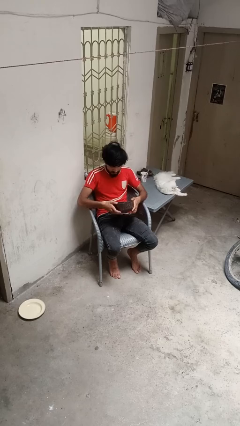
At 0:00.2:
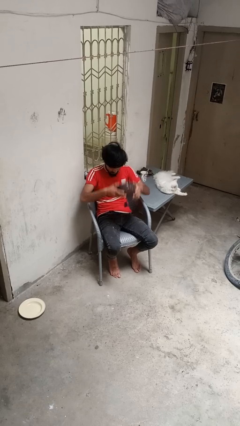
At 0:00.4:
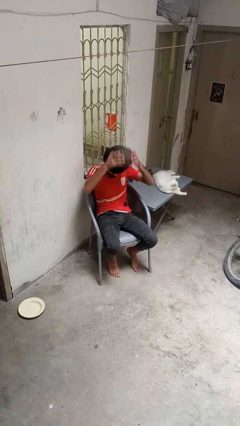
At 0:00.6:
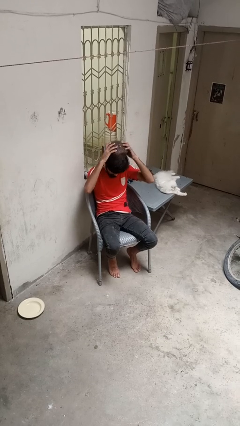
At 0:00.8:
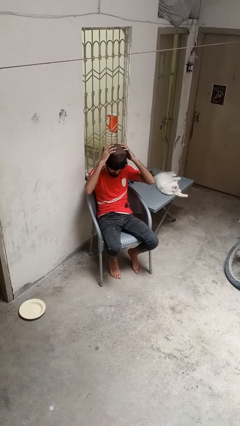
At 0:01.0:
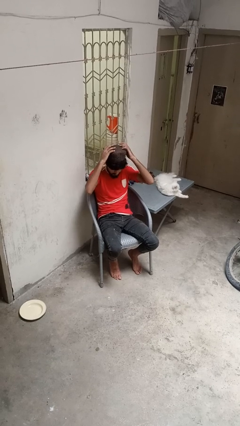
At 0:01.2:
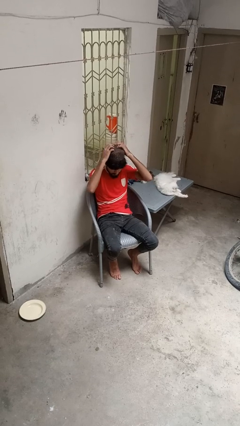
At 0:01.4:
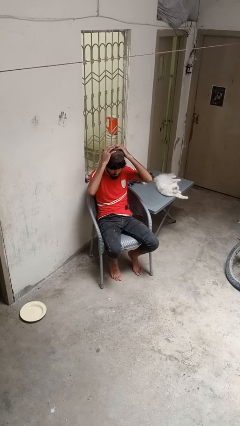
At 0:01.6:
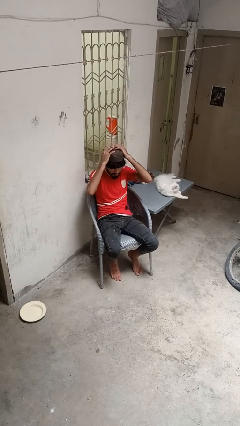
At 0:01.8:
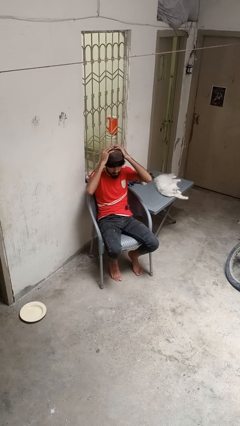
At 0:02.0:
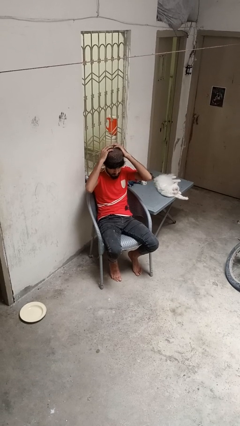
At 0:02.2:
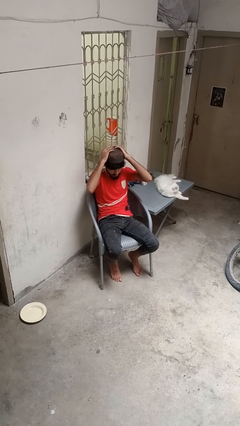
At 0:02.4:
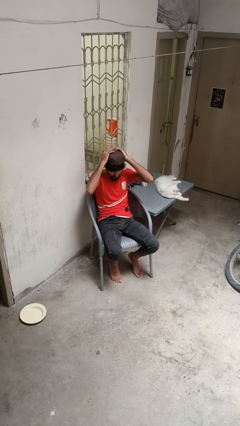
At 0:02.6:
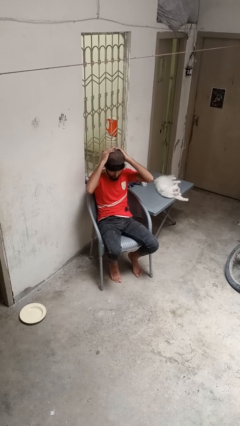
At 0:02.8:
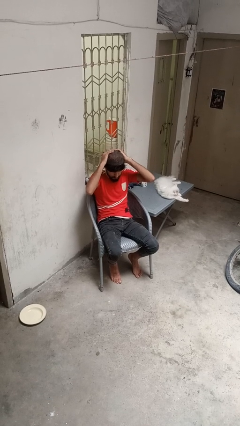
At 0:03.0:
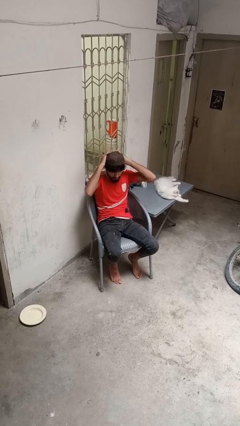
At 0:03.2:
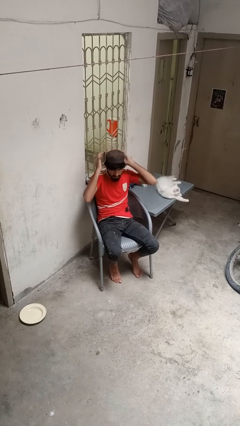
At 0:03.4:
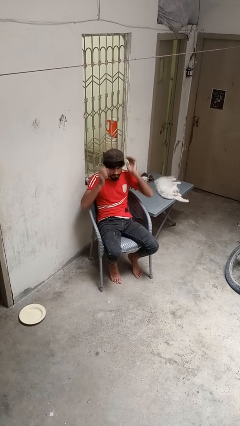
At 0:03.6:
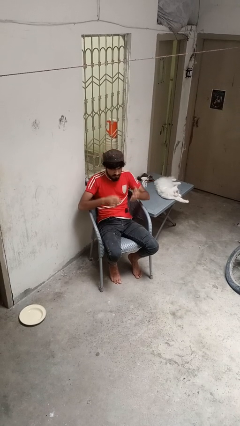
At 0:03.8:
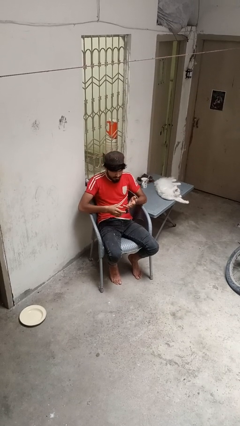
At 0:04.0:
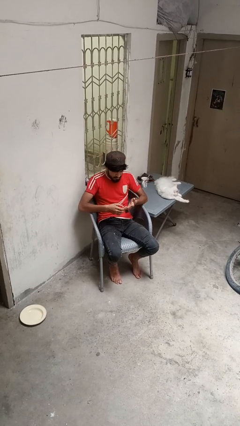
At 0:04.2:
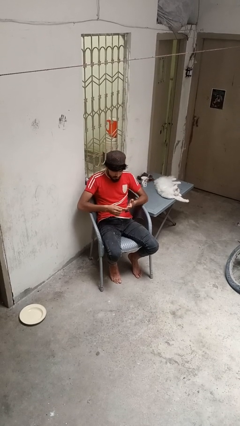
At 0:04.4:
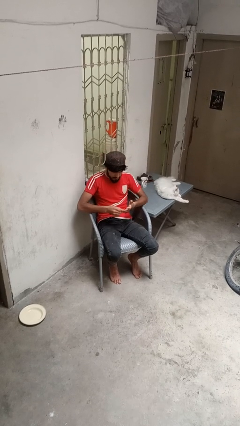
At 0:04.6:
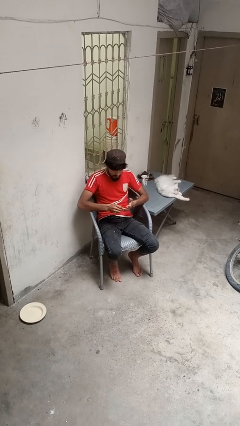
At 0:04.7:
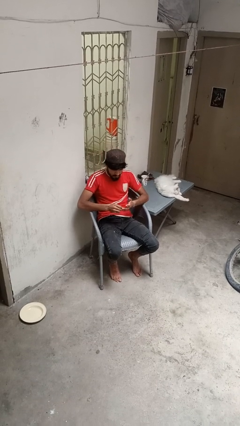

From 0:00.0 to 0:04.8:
person puts on hat

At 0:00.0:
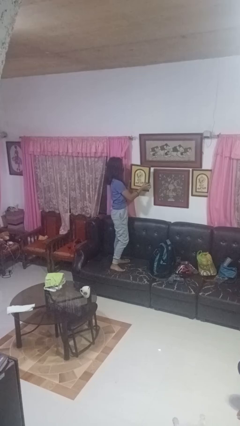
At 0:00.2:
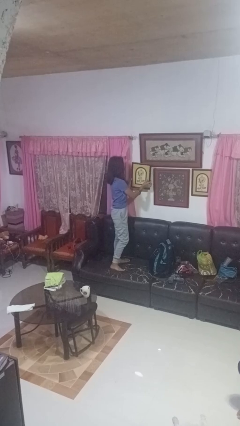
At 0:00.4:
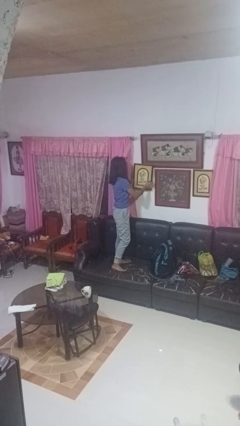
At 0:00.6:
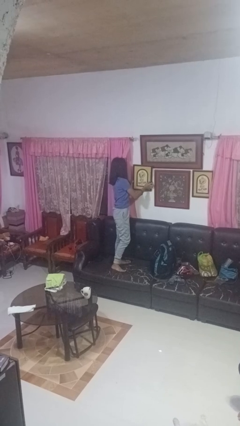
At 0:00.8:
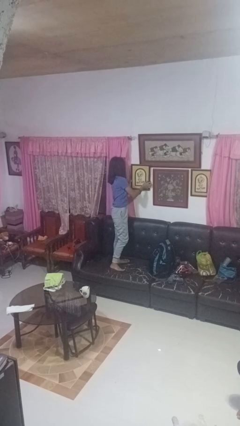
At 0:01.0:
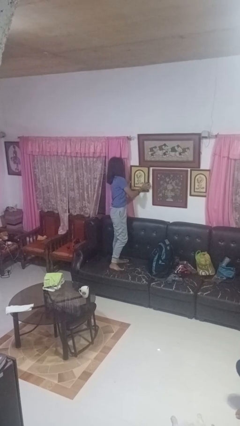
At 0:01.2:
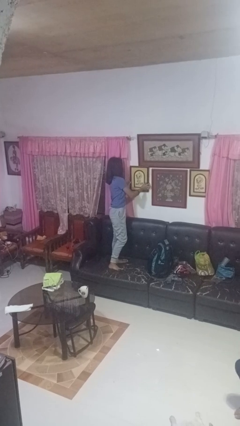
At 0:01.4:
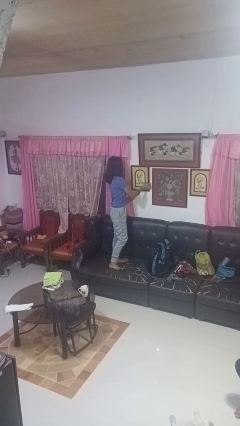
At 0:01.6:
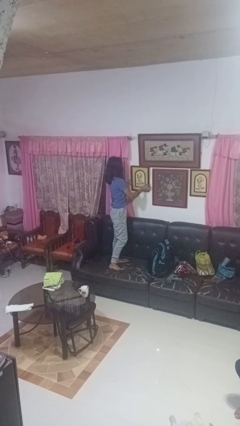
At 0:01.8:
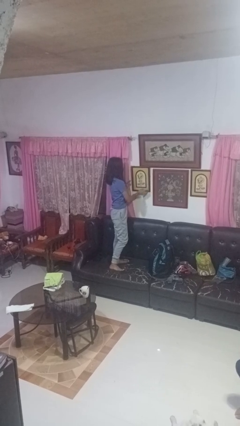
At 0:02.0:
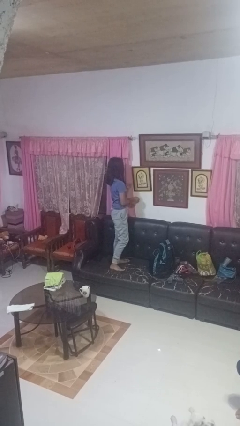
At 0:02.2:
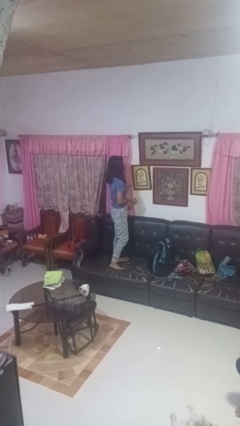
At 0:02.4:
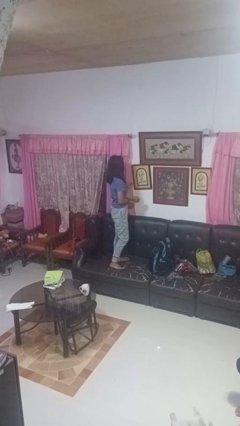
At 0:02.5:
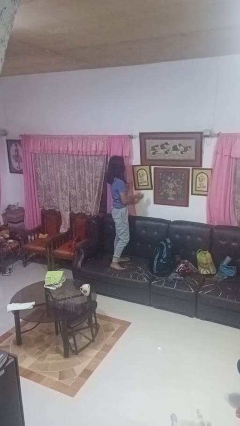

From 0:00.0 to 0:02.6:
person puts up picture frame

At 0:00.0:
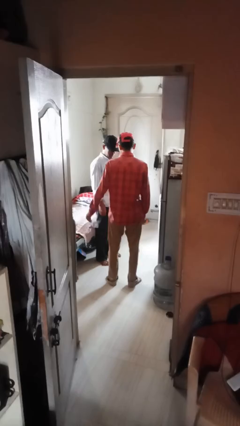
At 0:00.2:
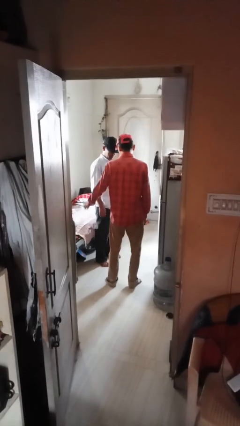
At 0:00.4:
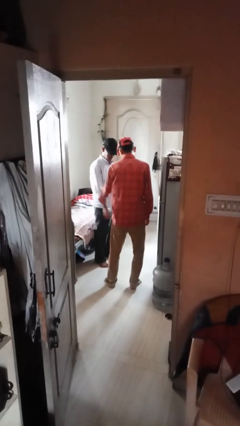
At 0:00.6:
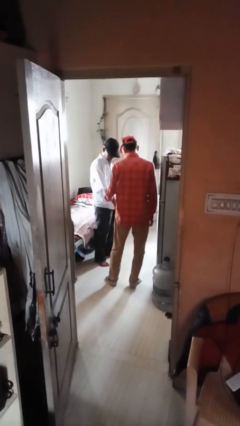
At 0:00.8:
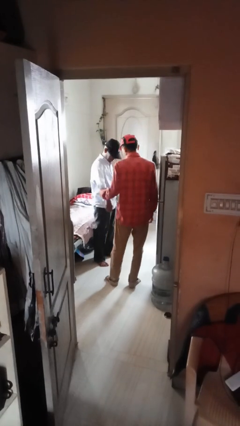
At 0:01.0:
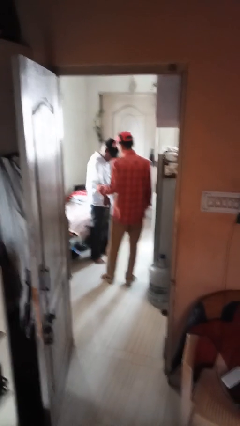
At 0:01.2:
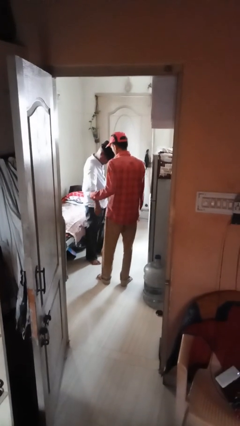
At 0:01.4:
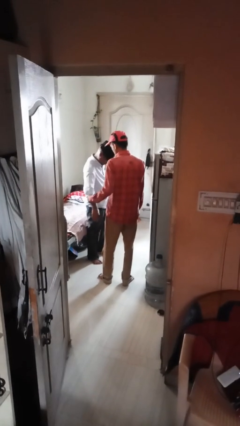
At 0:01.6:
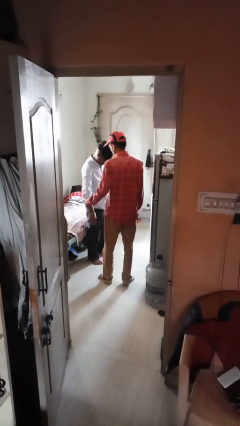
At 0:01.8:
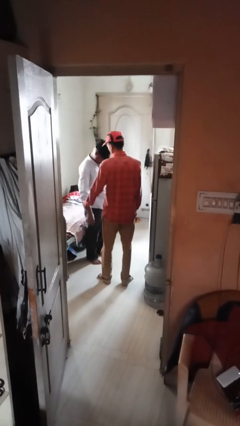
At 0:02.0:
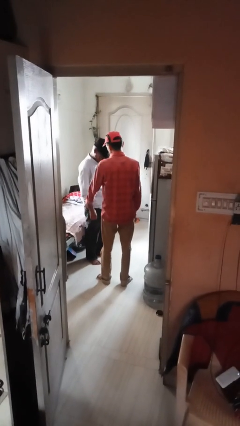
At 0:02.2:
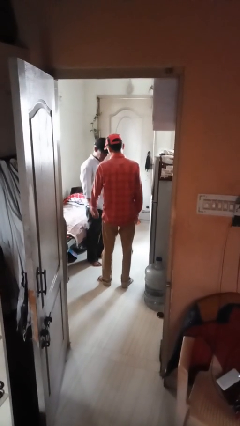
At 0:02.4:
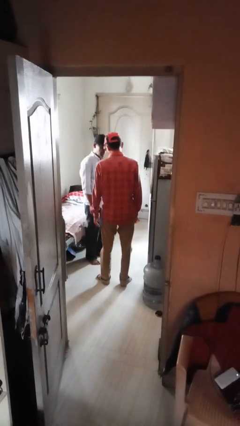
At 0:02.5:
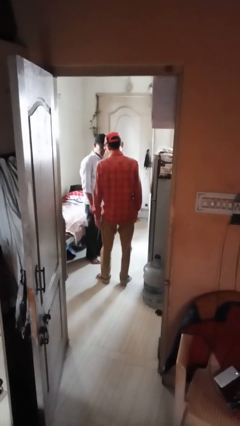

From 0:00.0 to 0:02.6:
person grabs person by forearm

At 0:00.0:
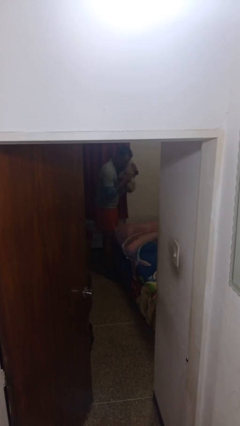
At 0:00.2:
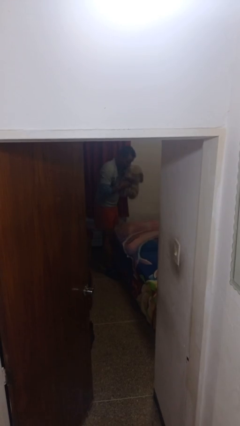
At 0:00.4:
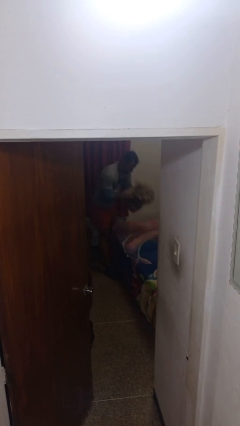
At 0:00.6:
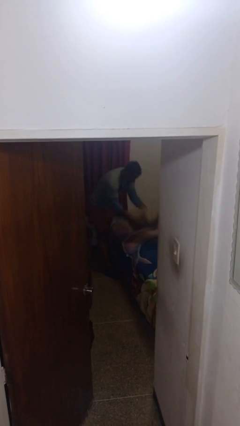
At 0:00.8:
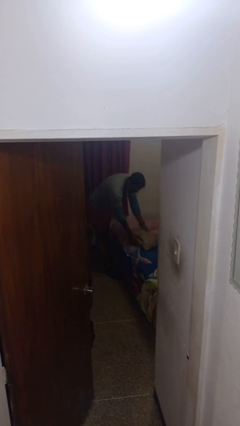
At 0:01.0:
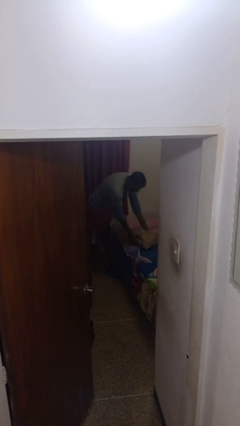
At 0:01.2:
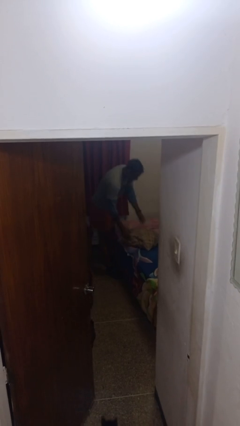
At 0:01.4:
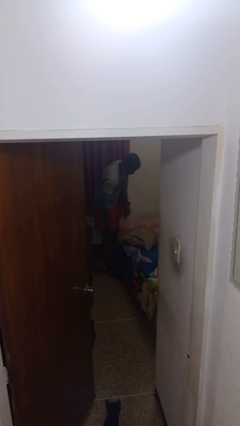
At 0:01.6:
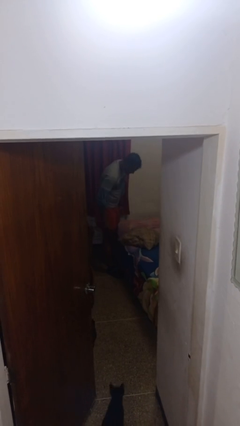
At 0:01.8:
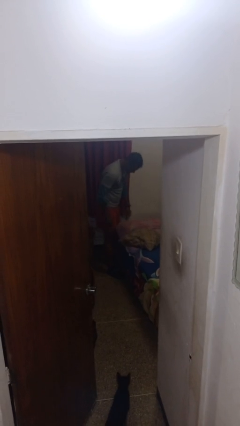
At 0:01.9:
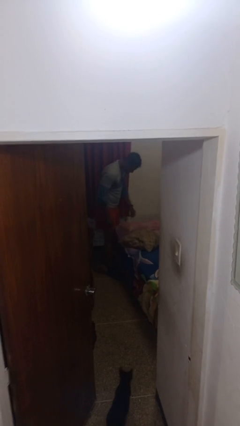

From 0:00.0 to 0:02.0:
person puts down object on bed

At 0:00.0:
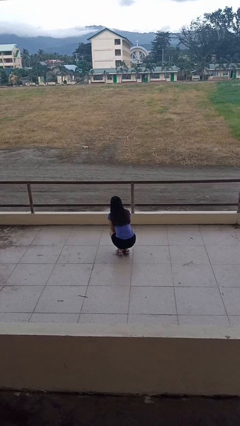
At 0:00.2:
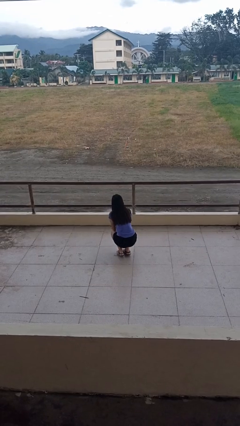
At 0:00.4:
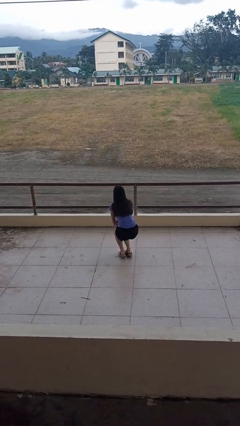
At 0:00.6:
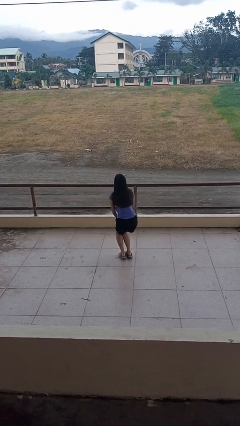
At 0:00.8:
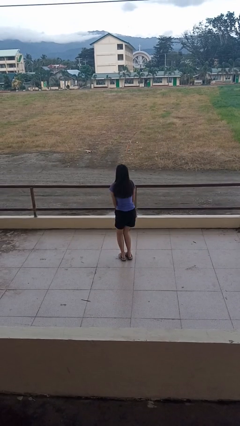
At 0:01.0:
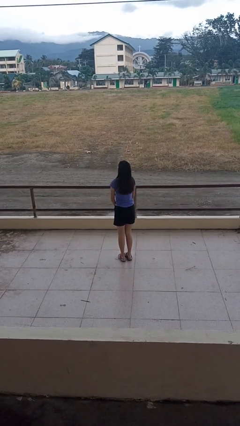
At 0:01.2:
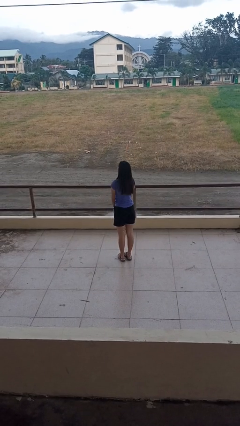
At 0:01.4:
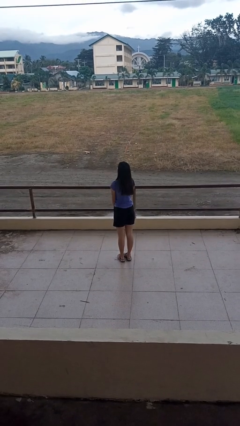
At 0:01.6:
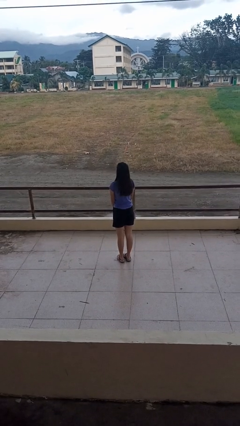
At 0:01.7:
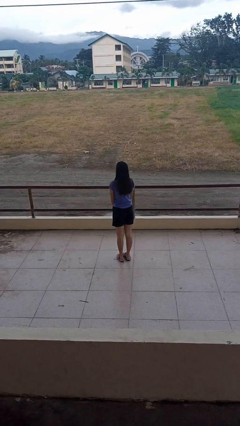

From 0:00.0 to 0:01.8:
person stands up

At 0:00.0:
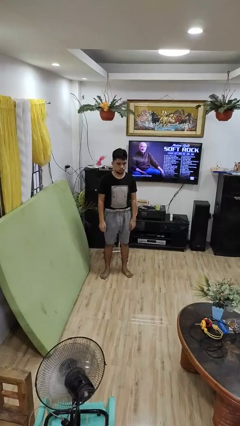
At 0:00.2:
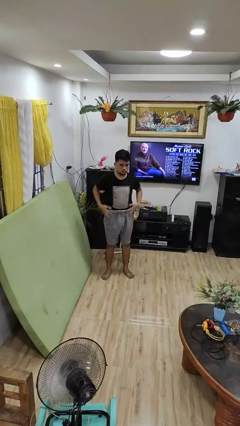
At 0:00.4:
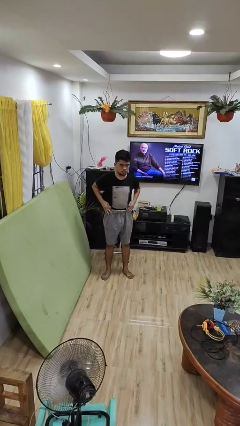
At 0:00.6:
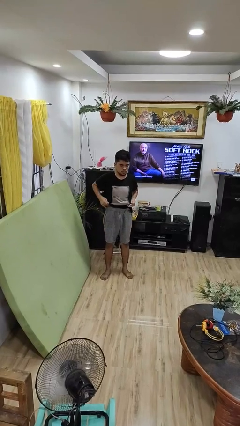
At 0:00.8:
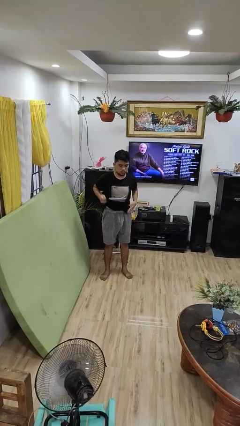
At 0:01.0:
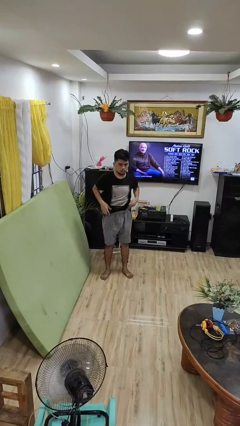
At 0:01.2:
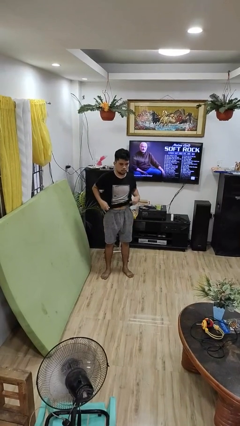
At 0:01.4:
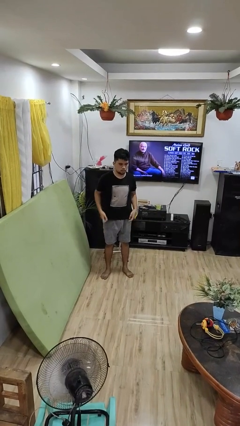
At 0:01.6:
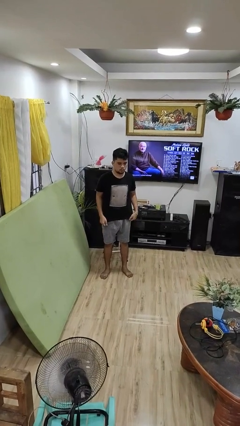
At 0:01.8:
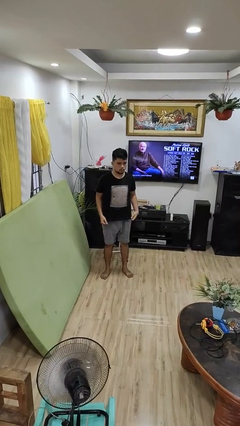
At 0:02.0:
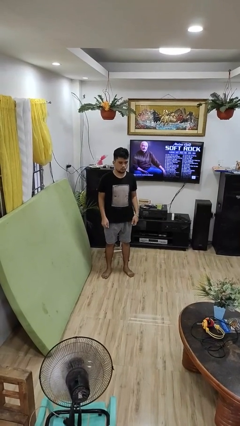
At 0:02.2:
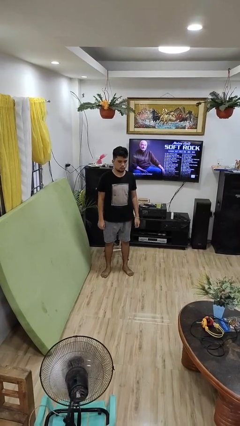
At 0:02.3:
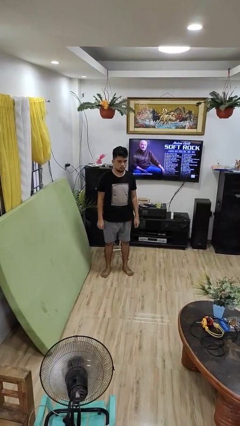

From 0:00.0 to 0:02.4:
person untucks shirt

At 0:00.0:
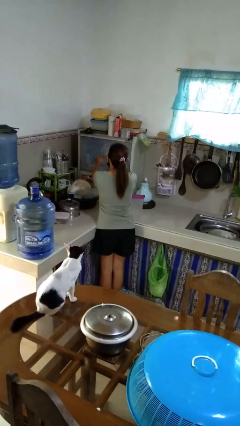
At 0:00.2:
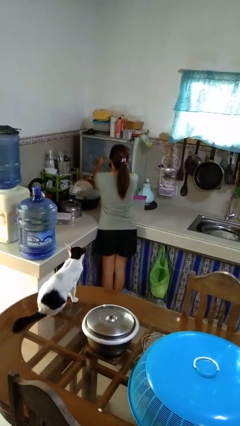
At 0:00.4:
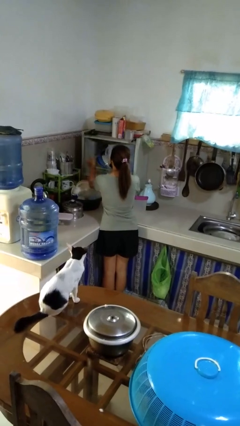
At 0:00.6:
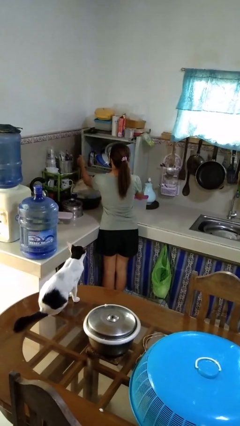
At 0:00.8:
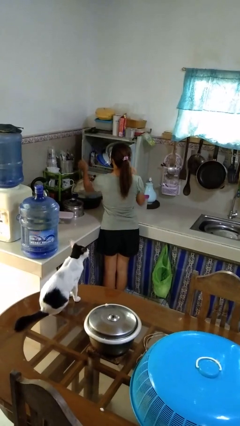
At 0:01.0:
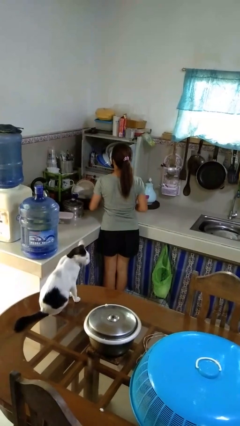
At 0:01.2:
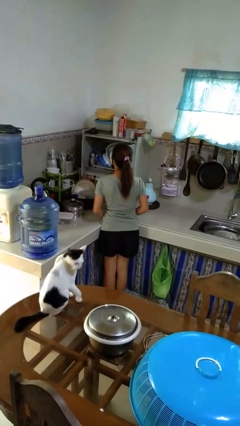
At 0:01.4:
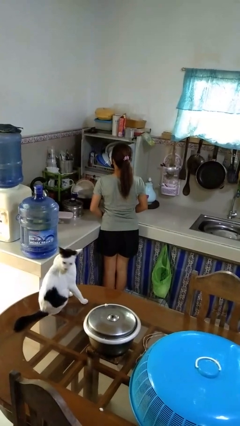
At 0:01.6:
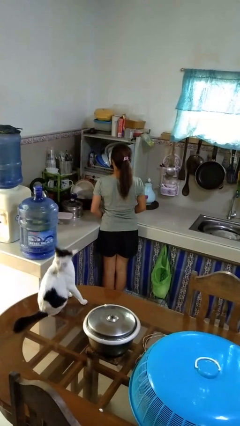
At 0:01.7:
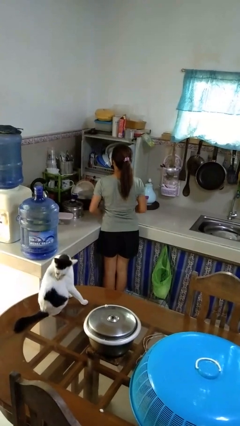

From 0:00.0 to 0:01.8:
person opens kitchen drawer
